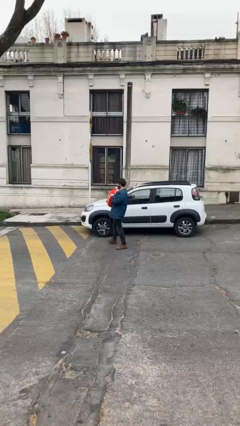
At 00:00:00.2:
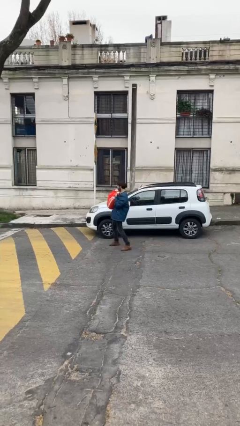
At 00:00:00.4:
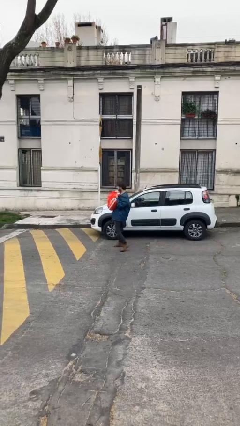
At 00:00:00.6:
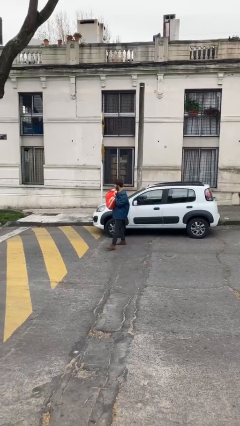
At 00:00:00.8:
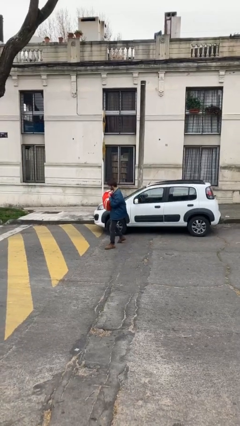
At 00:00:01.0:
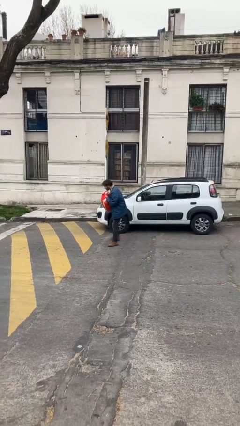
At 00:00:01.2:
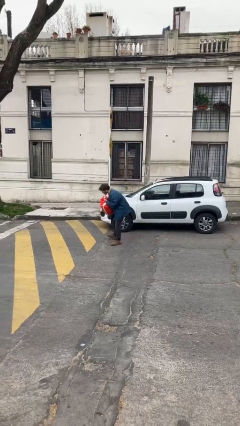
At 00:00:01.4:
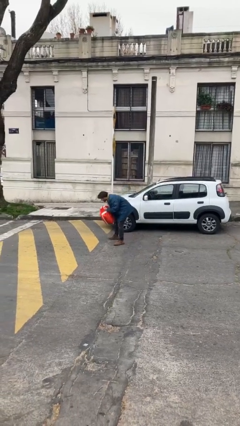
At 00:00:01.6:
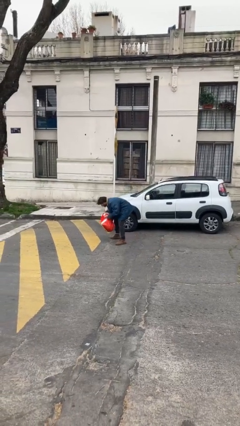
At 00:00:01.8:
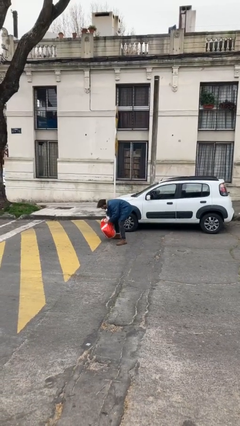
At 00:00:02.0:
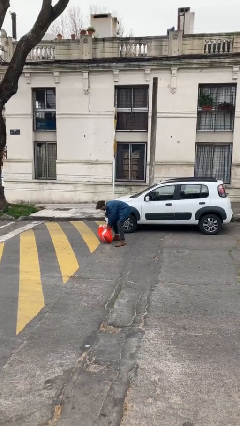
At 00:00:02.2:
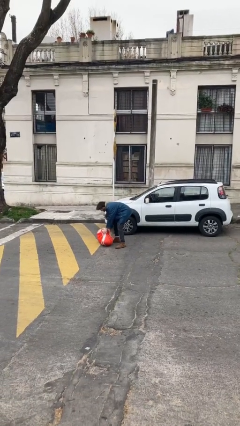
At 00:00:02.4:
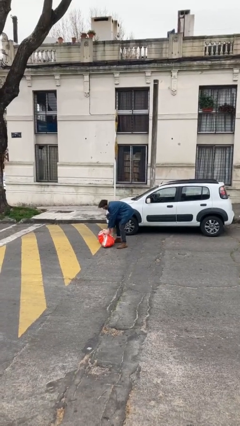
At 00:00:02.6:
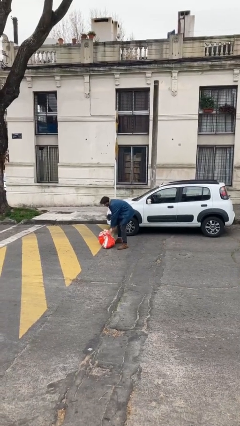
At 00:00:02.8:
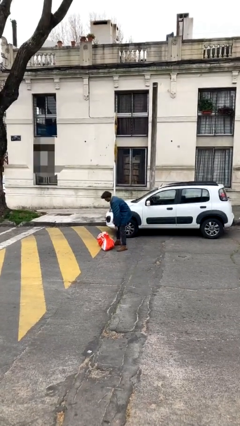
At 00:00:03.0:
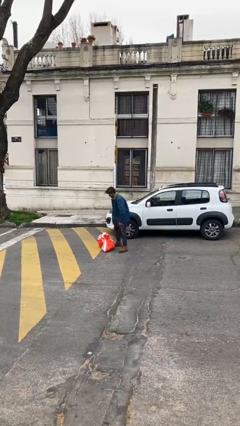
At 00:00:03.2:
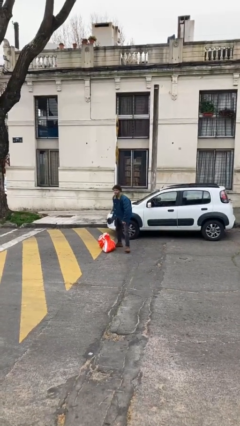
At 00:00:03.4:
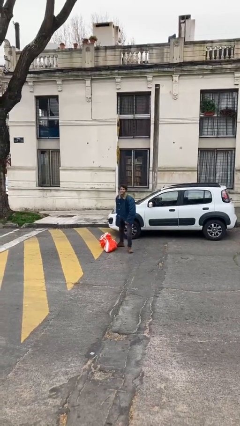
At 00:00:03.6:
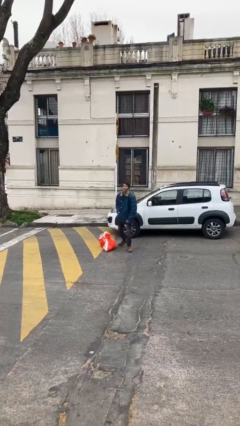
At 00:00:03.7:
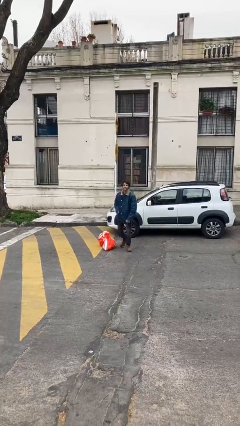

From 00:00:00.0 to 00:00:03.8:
person puts down object on floor

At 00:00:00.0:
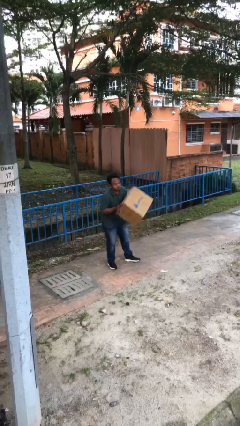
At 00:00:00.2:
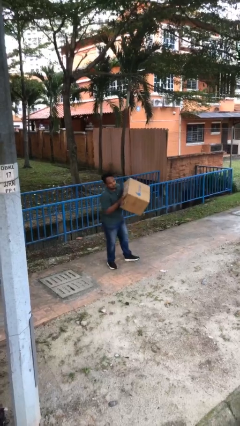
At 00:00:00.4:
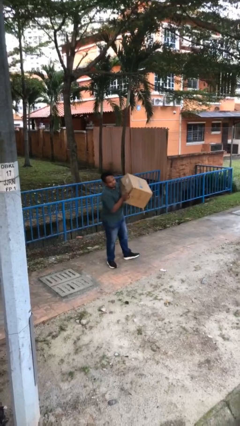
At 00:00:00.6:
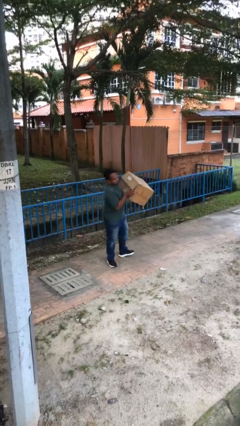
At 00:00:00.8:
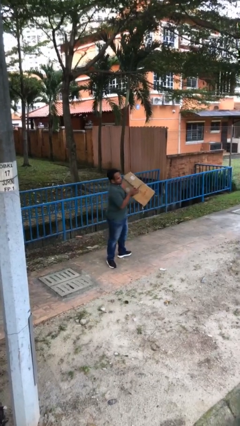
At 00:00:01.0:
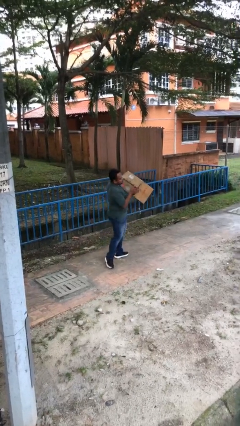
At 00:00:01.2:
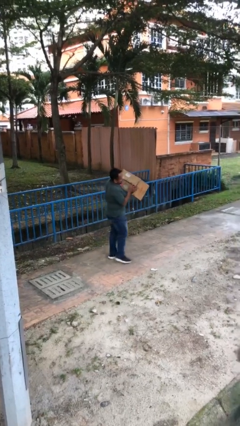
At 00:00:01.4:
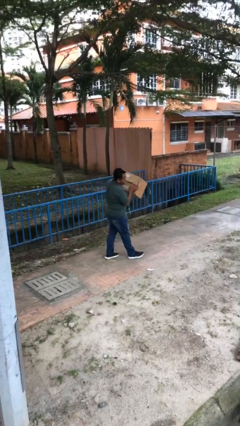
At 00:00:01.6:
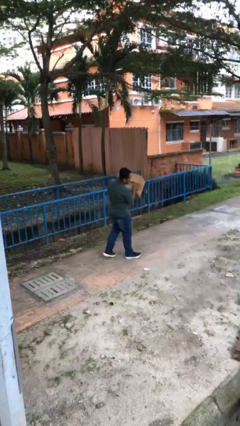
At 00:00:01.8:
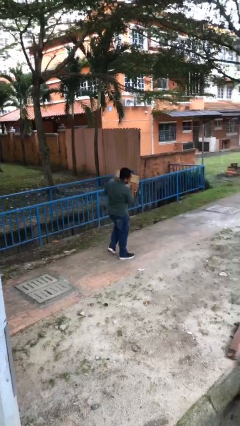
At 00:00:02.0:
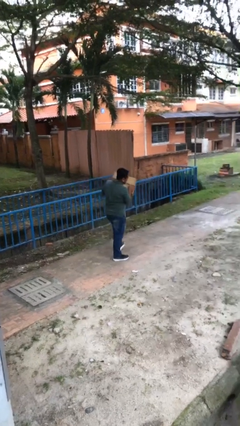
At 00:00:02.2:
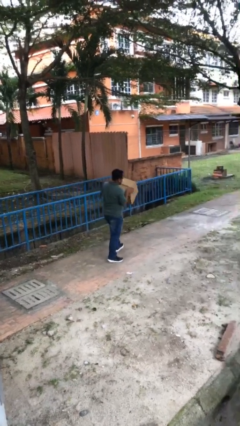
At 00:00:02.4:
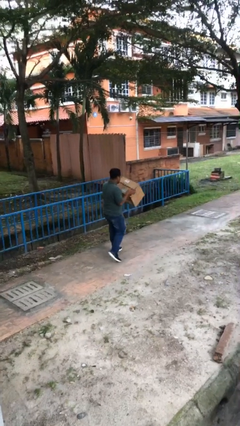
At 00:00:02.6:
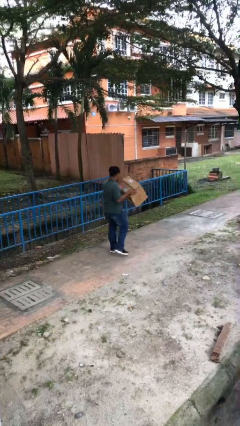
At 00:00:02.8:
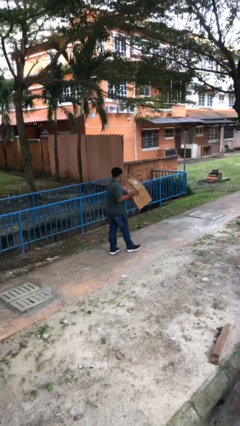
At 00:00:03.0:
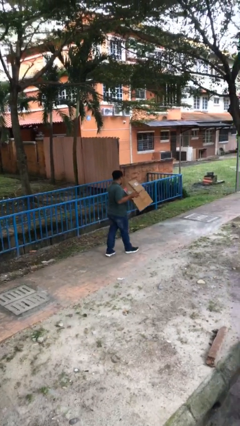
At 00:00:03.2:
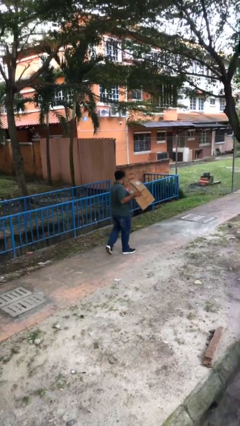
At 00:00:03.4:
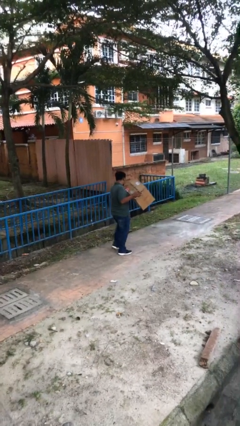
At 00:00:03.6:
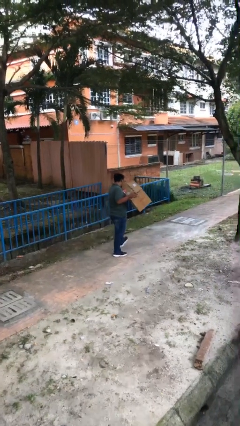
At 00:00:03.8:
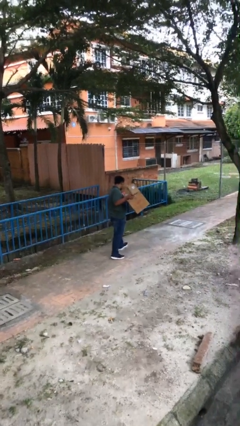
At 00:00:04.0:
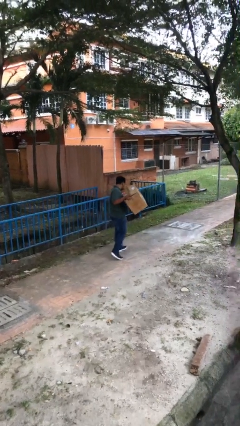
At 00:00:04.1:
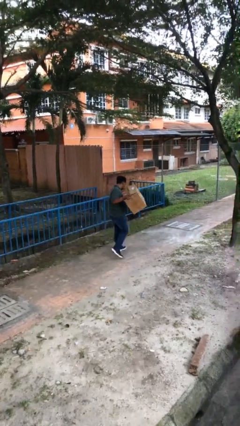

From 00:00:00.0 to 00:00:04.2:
person carries heavy object

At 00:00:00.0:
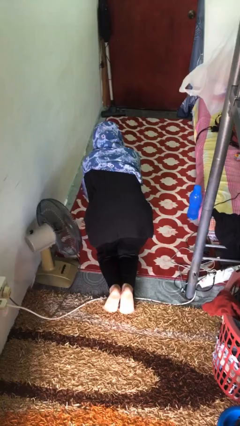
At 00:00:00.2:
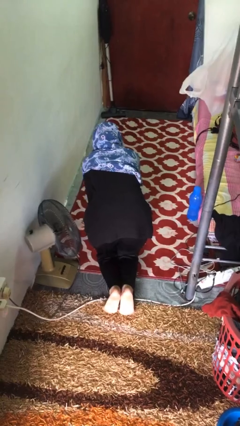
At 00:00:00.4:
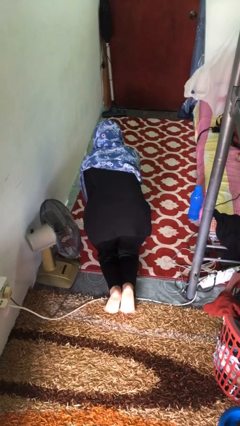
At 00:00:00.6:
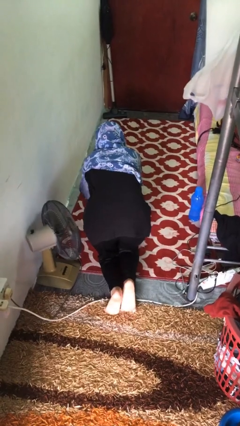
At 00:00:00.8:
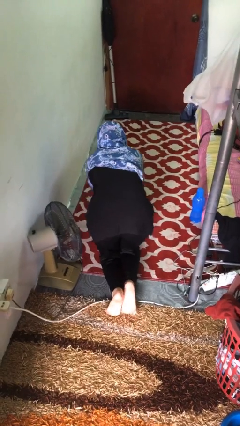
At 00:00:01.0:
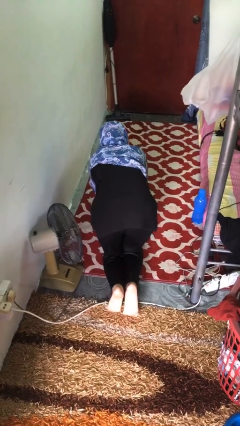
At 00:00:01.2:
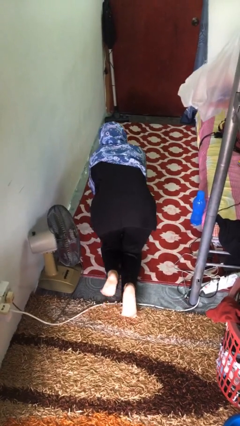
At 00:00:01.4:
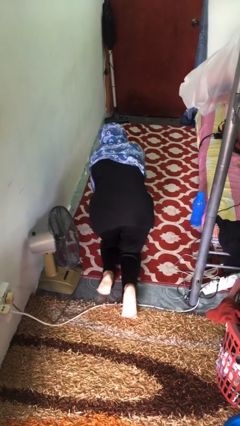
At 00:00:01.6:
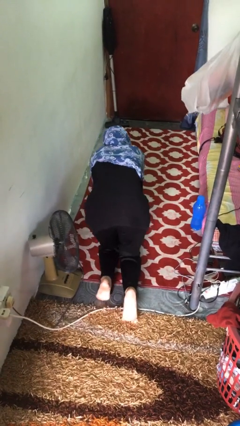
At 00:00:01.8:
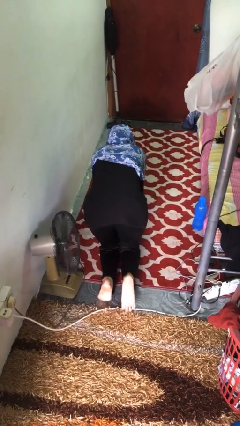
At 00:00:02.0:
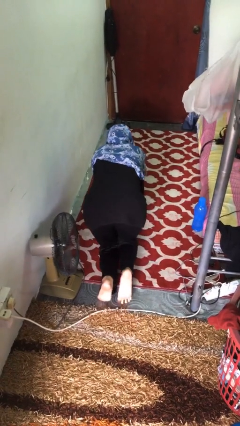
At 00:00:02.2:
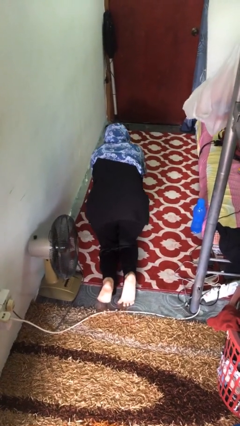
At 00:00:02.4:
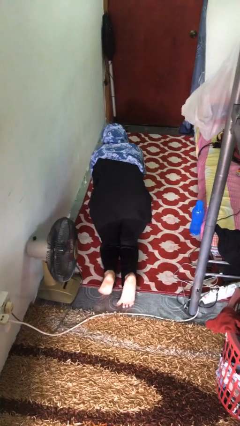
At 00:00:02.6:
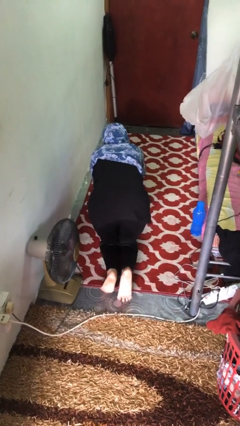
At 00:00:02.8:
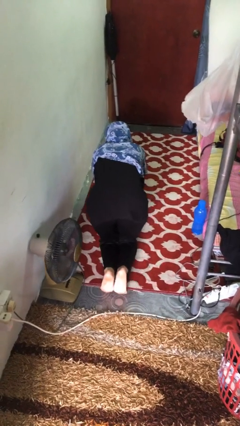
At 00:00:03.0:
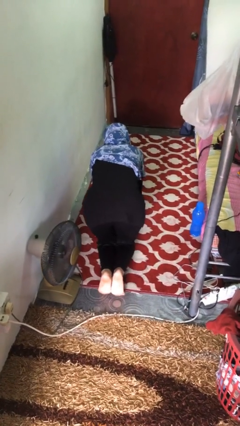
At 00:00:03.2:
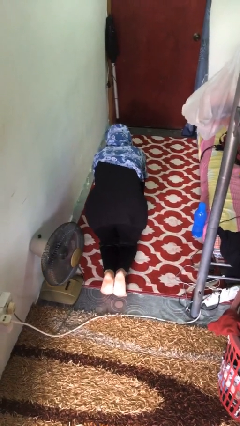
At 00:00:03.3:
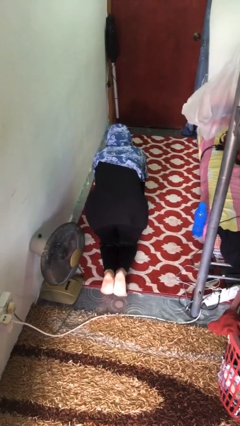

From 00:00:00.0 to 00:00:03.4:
person crawls

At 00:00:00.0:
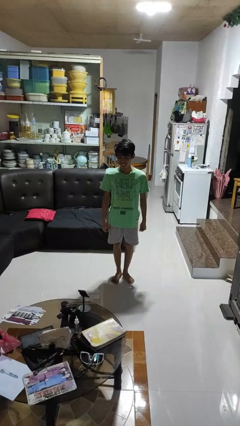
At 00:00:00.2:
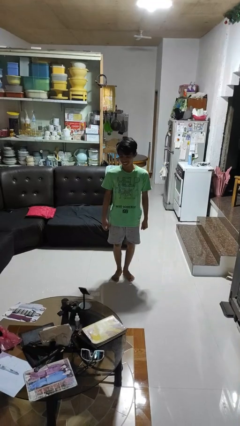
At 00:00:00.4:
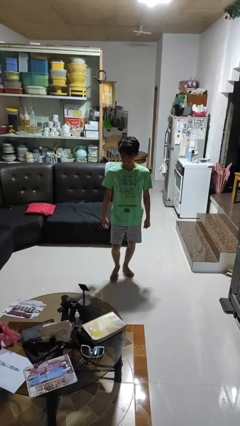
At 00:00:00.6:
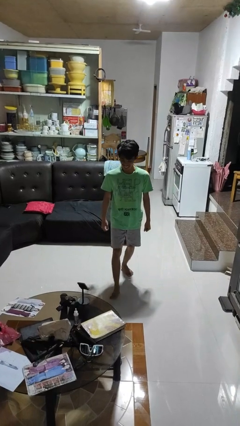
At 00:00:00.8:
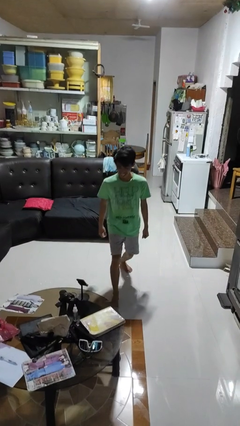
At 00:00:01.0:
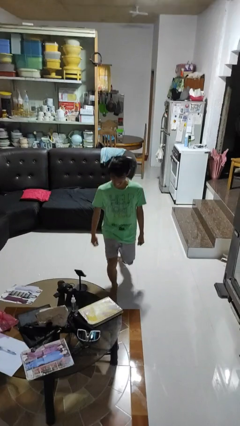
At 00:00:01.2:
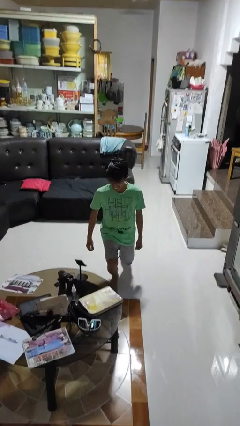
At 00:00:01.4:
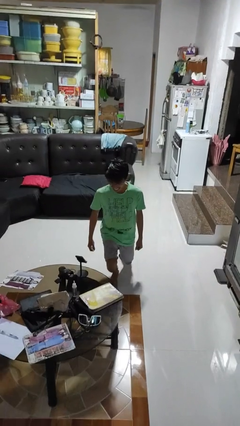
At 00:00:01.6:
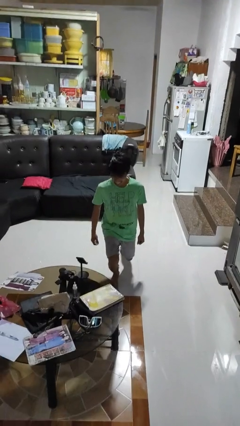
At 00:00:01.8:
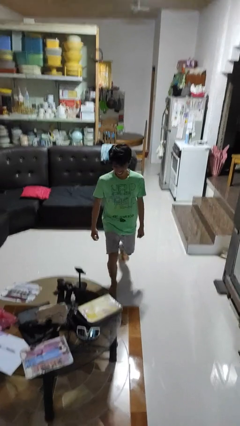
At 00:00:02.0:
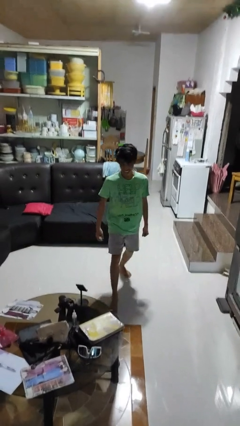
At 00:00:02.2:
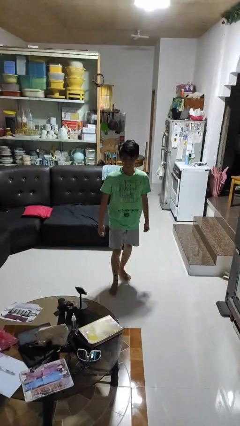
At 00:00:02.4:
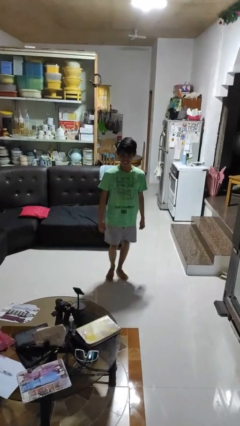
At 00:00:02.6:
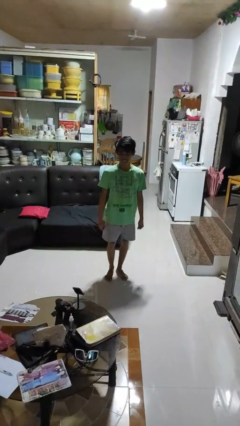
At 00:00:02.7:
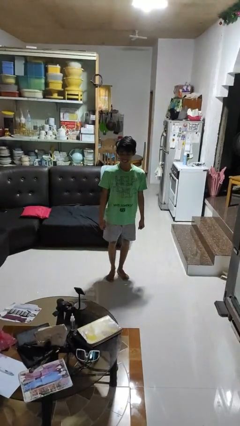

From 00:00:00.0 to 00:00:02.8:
person exercises with lunges

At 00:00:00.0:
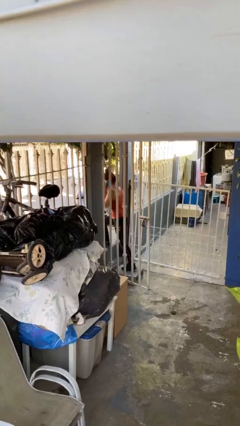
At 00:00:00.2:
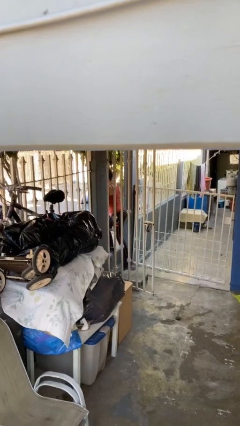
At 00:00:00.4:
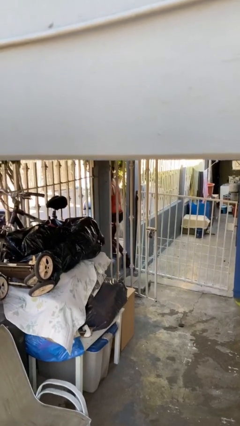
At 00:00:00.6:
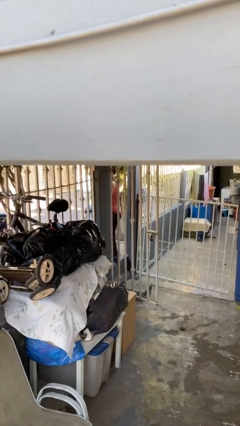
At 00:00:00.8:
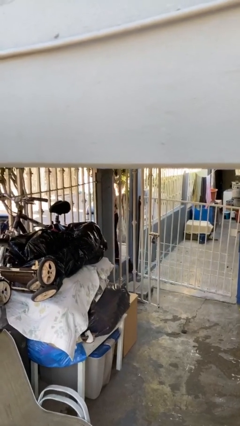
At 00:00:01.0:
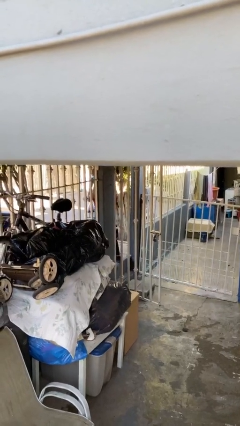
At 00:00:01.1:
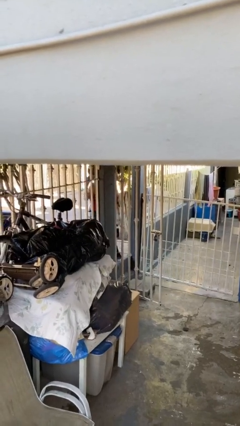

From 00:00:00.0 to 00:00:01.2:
person exits scene through structure

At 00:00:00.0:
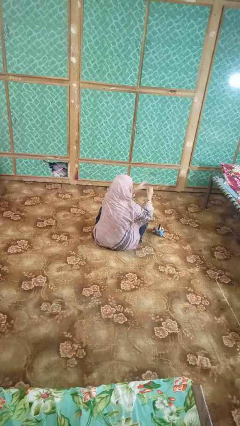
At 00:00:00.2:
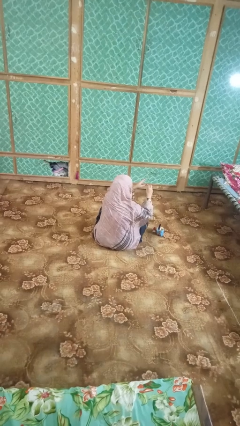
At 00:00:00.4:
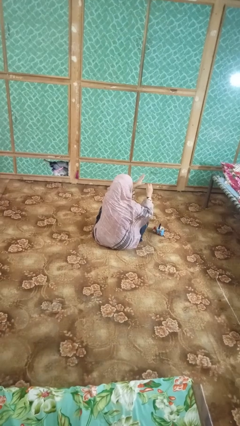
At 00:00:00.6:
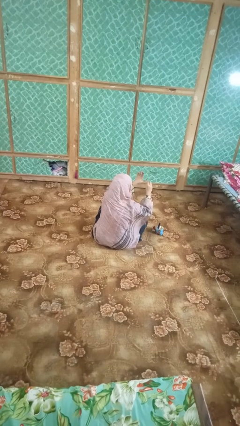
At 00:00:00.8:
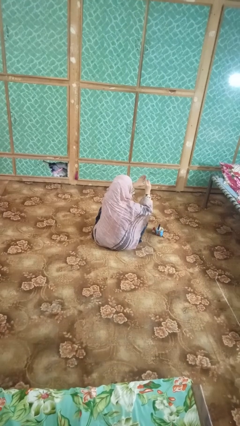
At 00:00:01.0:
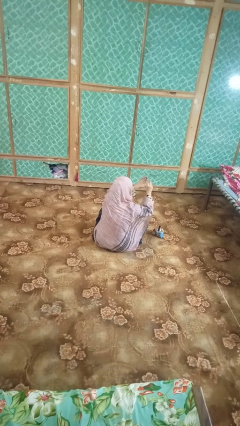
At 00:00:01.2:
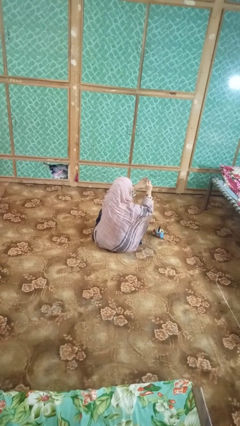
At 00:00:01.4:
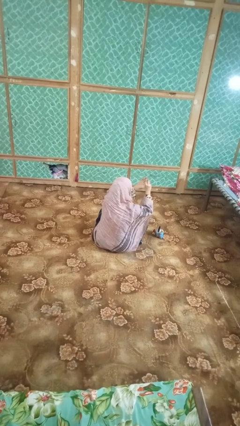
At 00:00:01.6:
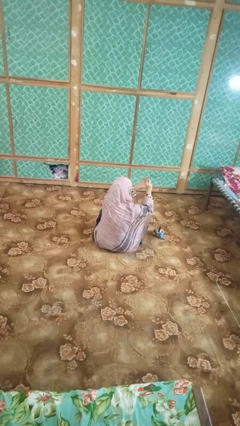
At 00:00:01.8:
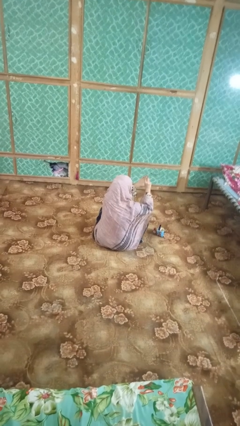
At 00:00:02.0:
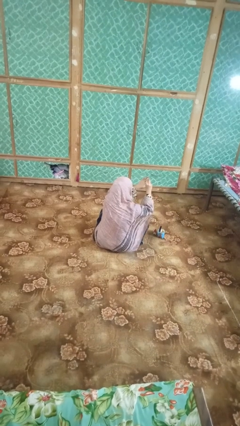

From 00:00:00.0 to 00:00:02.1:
person paints fingernails
